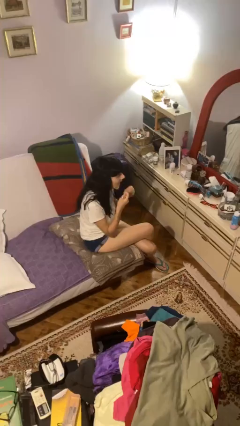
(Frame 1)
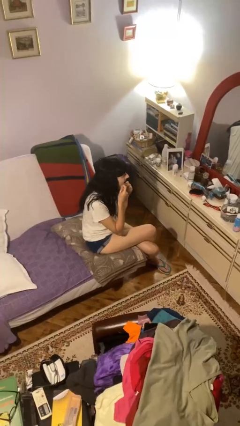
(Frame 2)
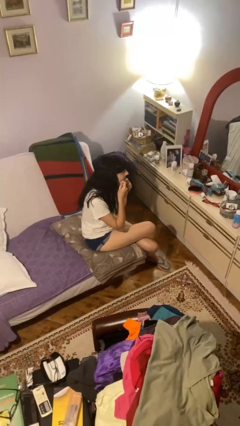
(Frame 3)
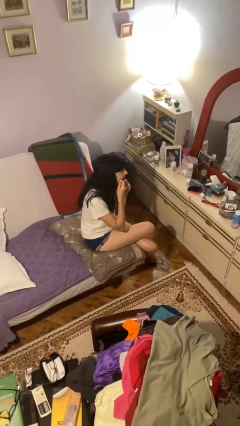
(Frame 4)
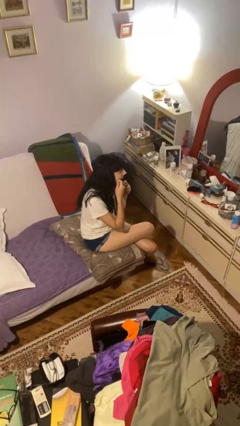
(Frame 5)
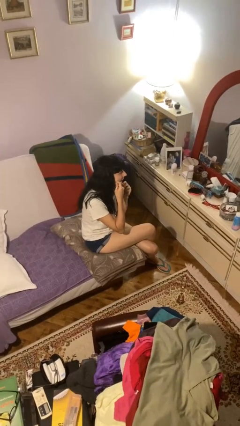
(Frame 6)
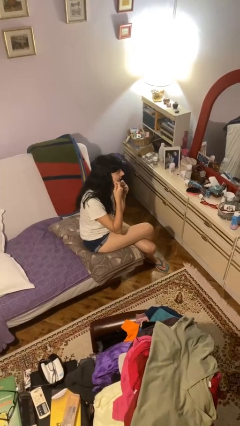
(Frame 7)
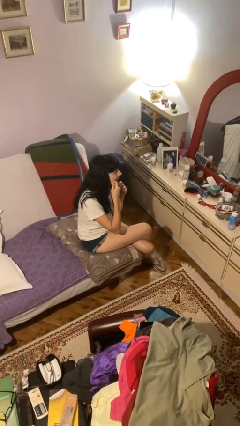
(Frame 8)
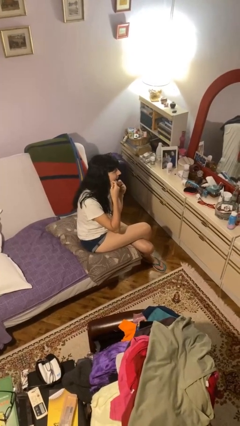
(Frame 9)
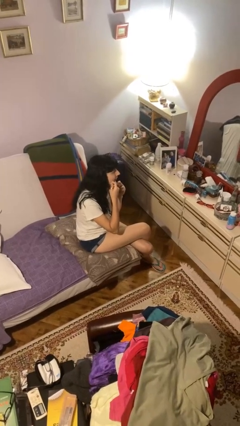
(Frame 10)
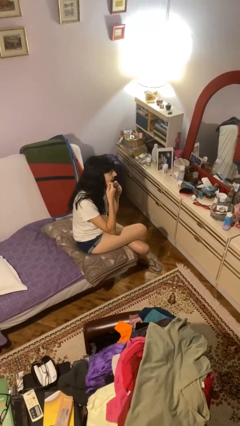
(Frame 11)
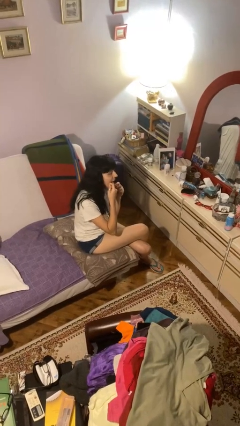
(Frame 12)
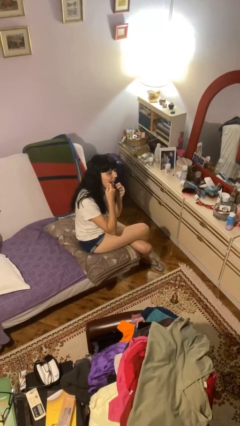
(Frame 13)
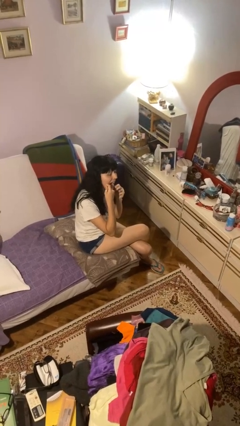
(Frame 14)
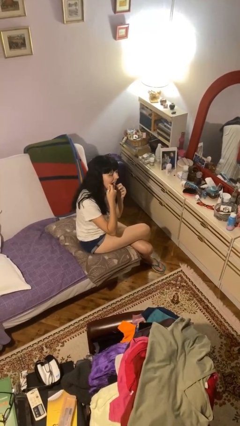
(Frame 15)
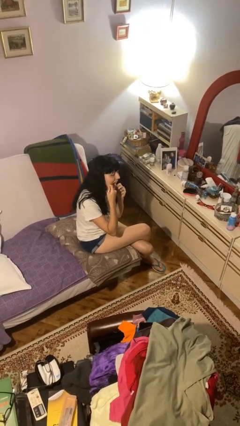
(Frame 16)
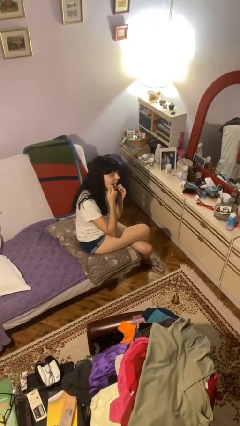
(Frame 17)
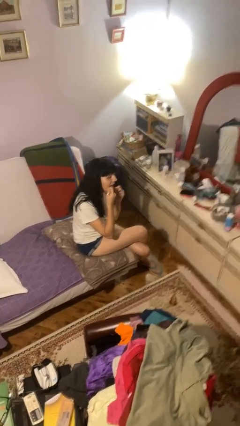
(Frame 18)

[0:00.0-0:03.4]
person flosses

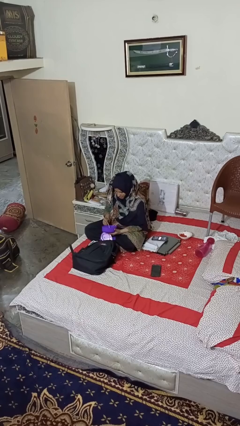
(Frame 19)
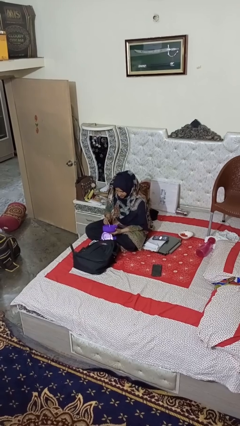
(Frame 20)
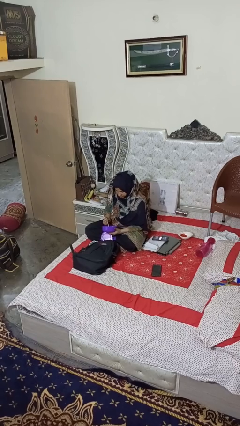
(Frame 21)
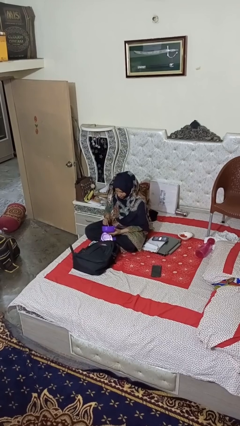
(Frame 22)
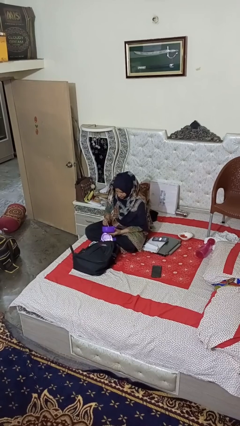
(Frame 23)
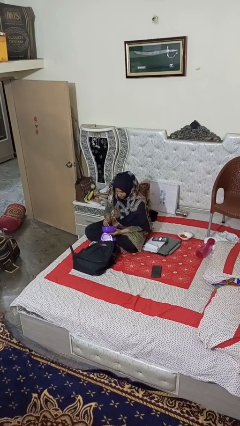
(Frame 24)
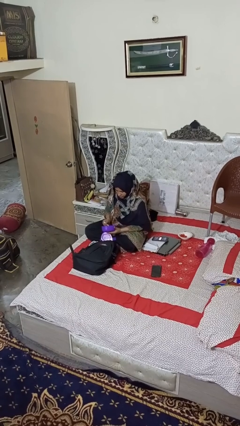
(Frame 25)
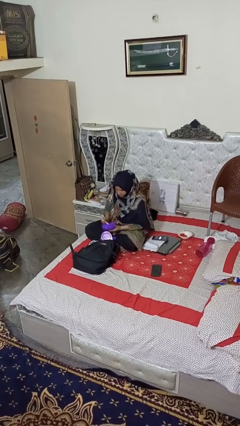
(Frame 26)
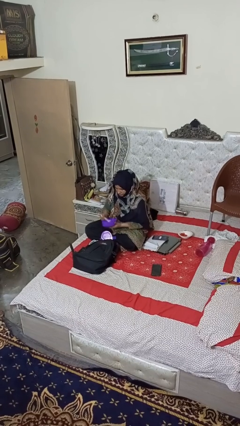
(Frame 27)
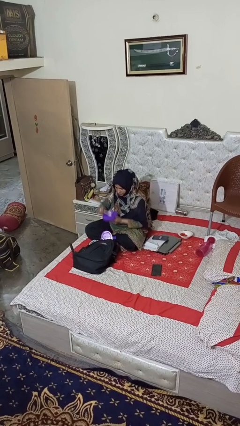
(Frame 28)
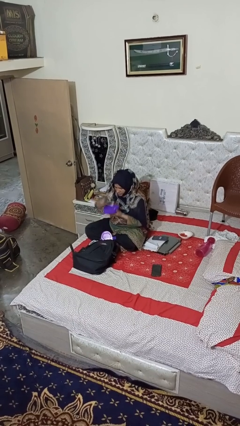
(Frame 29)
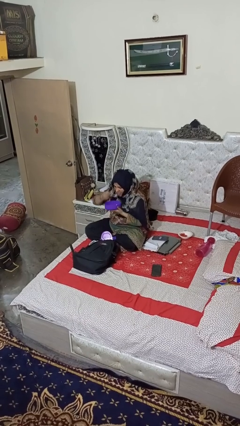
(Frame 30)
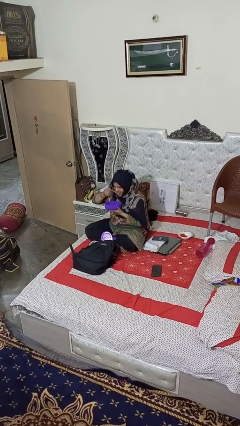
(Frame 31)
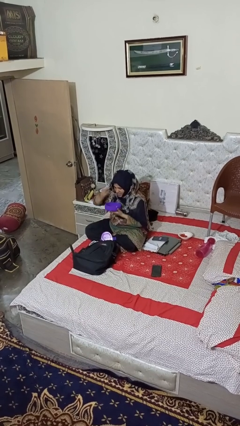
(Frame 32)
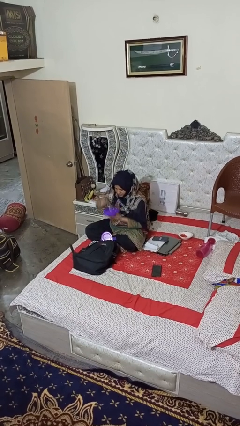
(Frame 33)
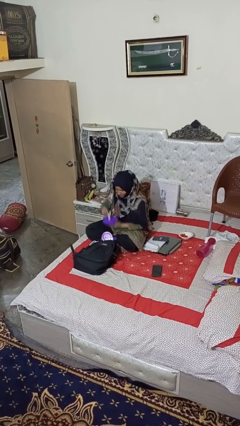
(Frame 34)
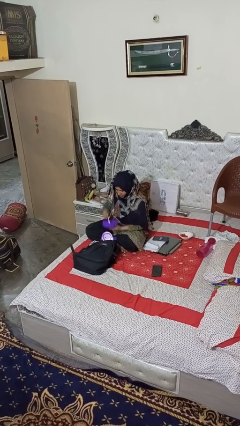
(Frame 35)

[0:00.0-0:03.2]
person eats snack from bag

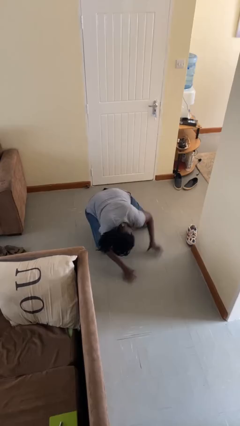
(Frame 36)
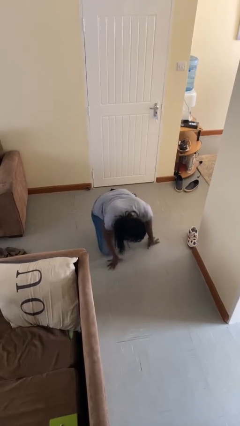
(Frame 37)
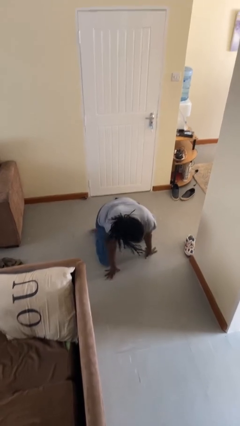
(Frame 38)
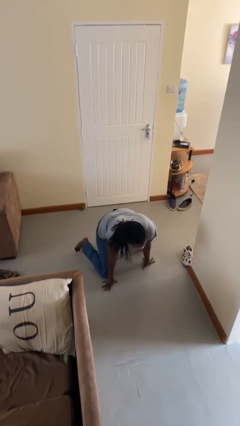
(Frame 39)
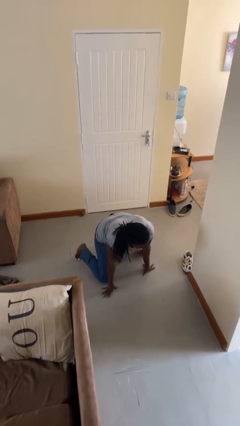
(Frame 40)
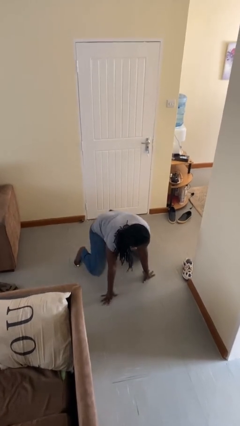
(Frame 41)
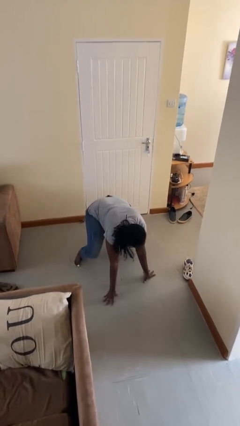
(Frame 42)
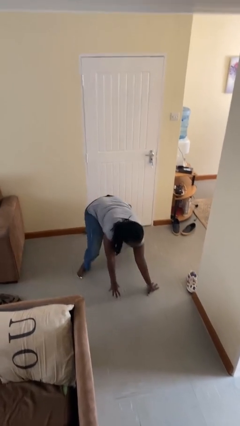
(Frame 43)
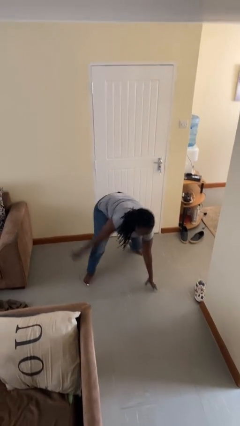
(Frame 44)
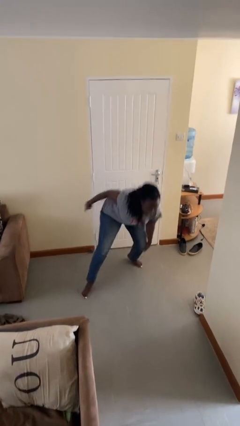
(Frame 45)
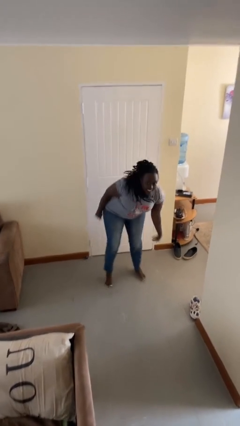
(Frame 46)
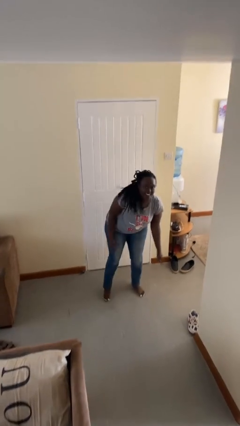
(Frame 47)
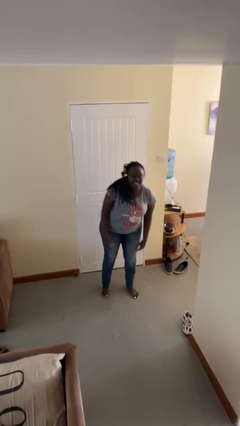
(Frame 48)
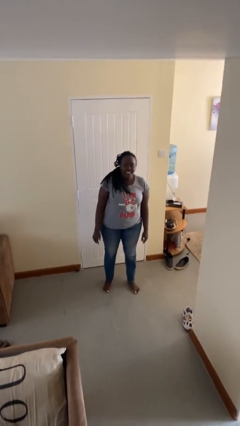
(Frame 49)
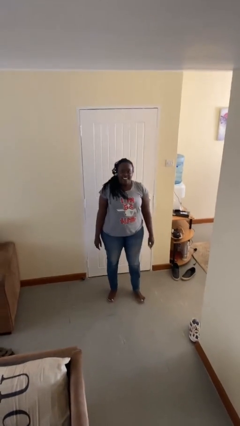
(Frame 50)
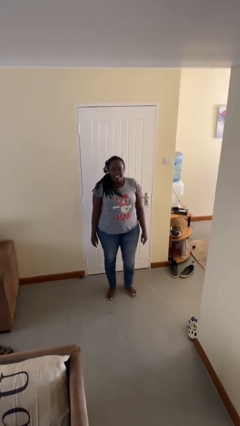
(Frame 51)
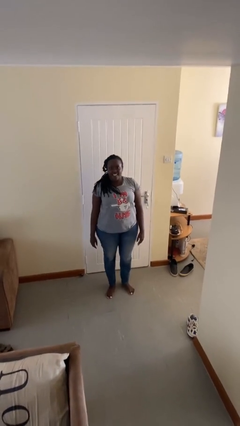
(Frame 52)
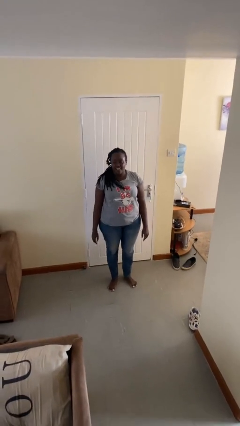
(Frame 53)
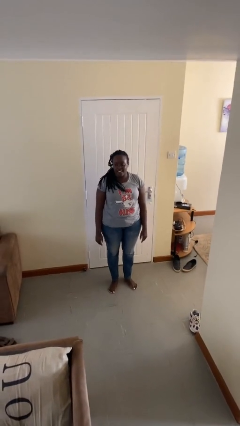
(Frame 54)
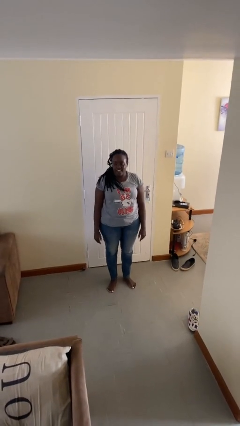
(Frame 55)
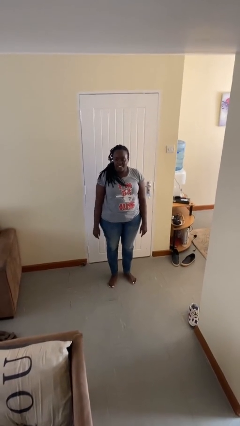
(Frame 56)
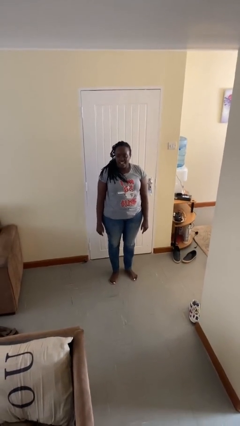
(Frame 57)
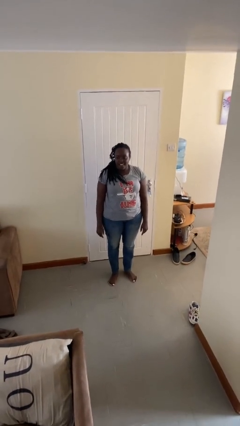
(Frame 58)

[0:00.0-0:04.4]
person stands up from floor

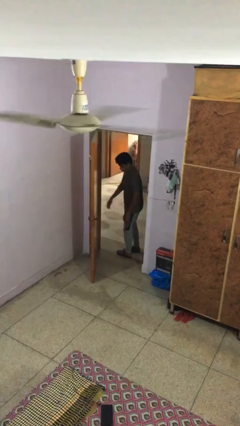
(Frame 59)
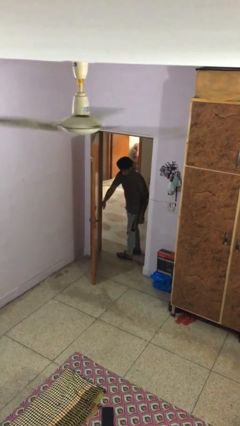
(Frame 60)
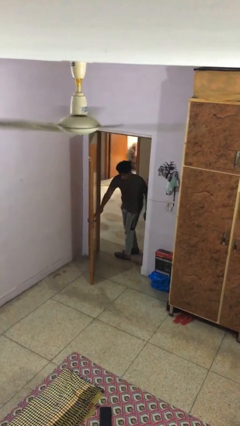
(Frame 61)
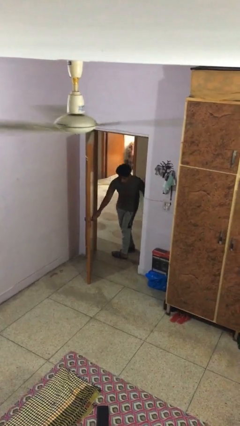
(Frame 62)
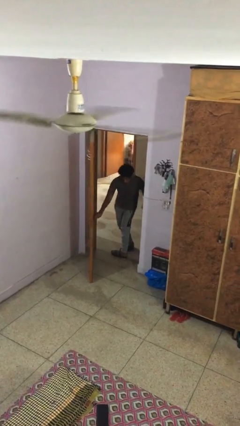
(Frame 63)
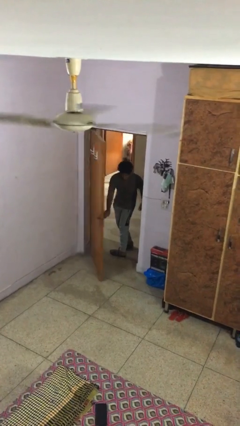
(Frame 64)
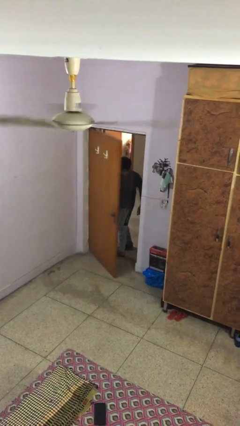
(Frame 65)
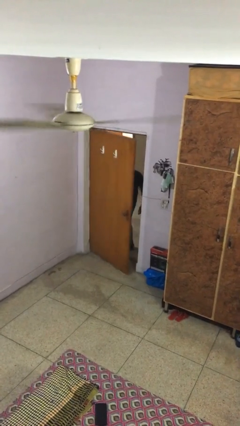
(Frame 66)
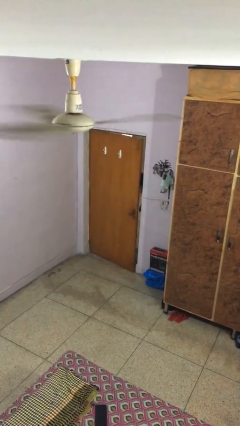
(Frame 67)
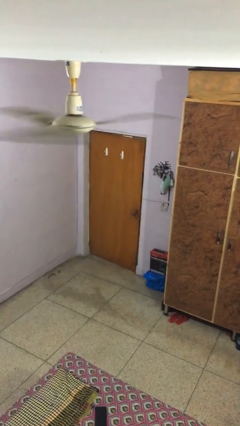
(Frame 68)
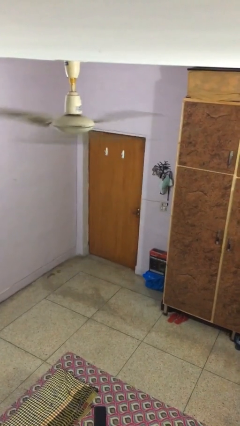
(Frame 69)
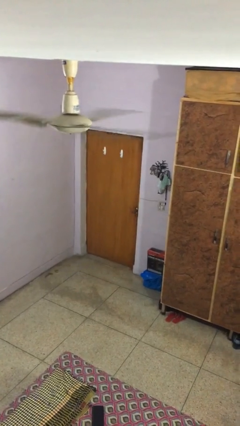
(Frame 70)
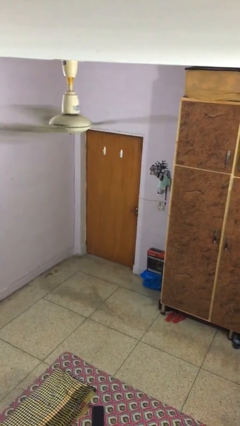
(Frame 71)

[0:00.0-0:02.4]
person closes facility door

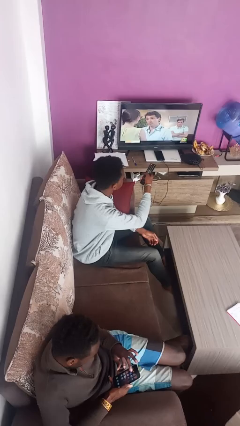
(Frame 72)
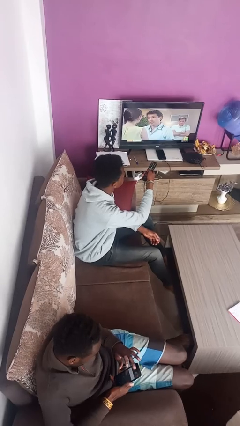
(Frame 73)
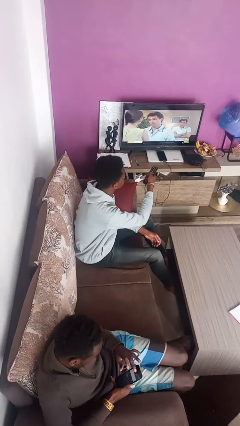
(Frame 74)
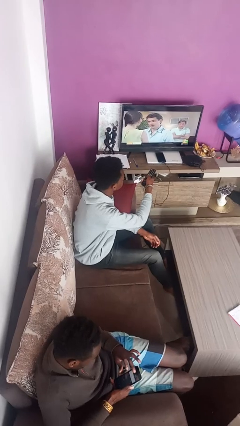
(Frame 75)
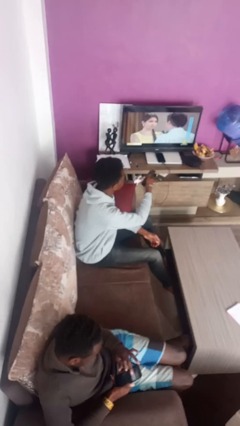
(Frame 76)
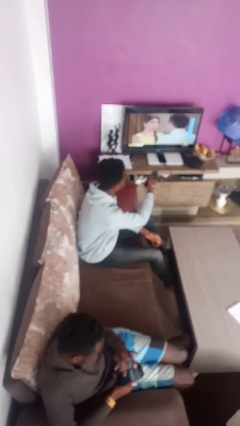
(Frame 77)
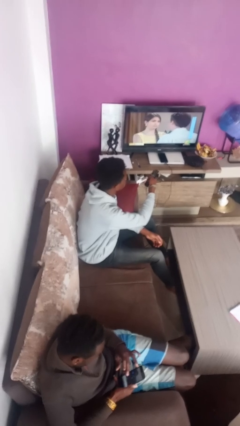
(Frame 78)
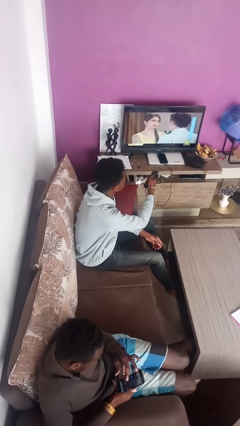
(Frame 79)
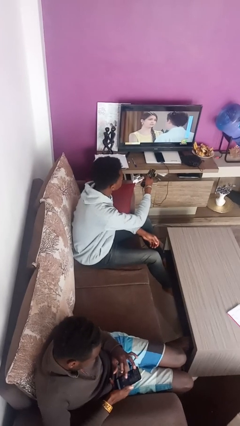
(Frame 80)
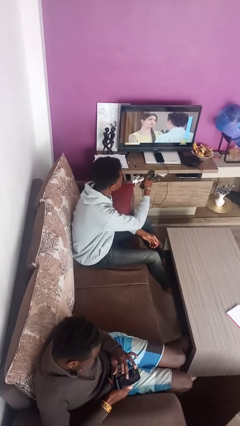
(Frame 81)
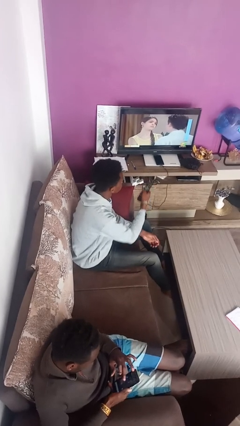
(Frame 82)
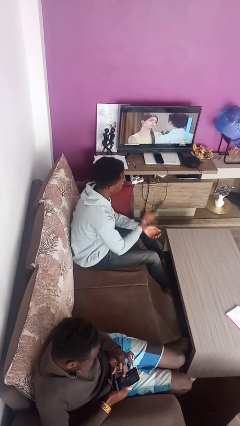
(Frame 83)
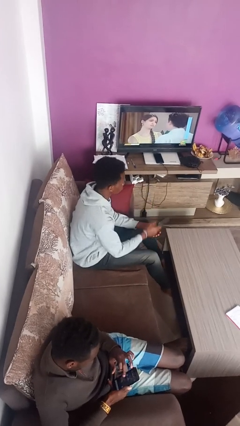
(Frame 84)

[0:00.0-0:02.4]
person uses television remote

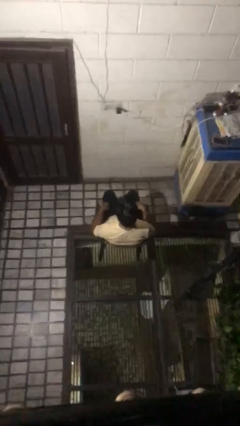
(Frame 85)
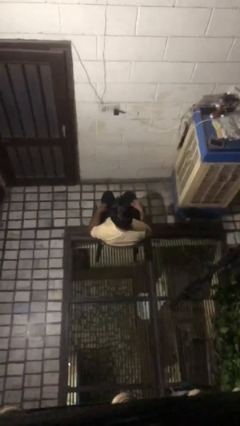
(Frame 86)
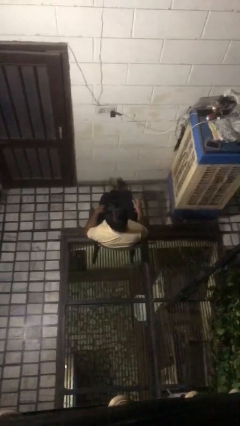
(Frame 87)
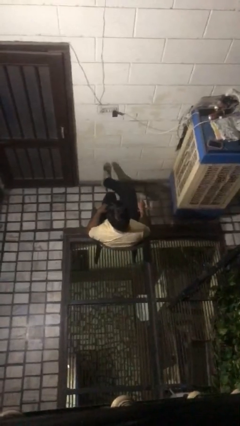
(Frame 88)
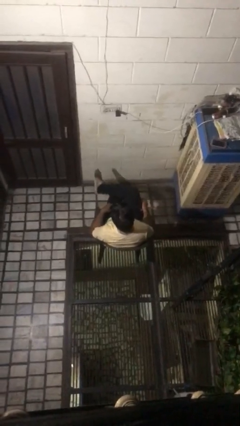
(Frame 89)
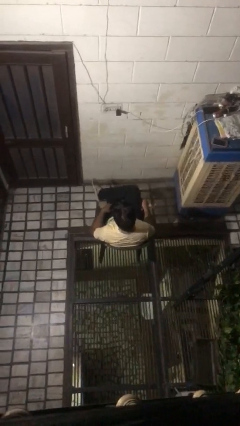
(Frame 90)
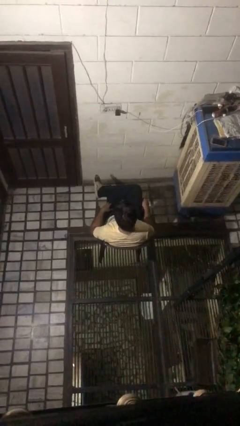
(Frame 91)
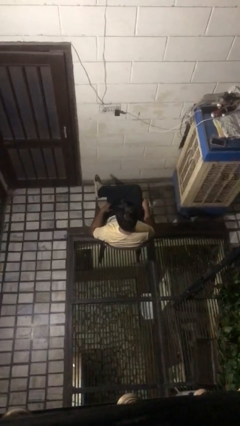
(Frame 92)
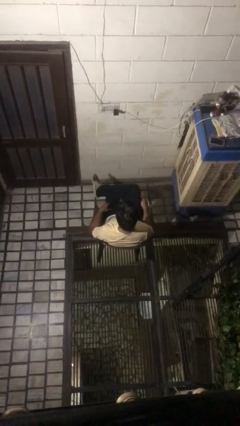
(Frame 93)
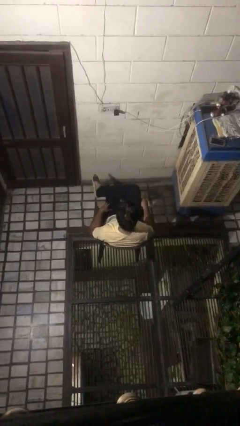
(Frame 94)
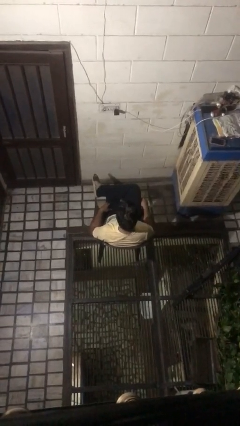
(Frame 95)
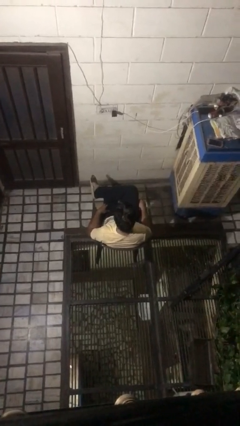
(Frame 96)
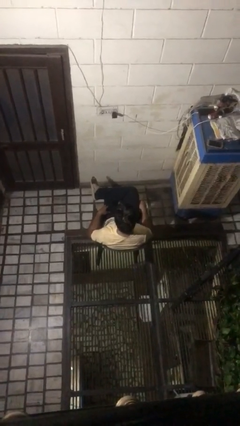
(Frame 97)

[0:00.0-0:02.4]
person crosses legs
